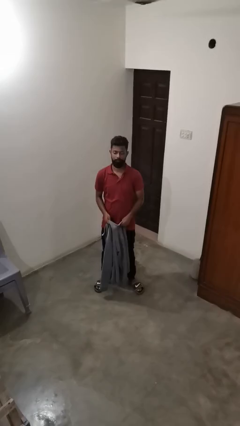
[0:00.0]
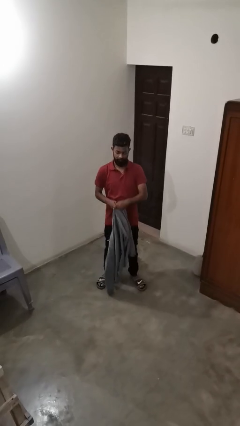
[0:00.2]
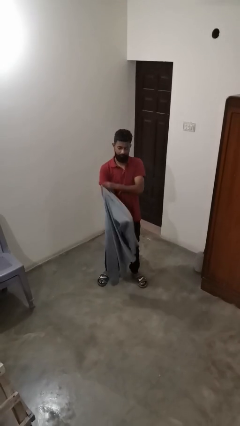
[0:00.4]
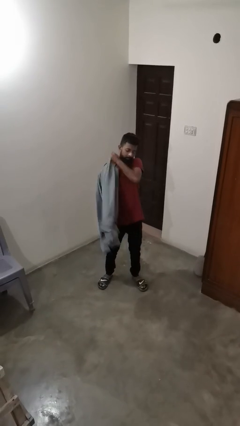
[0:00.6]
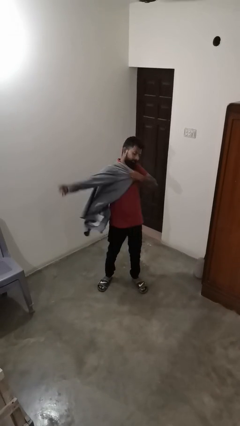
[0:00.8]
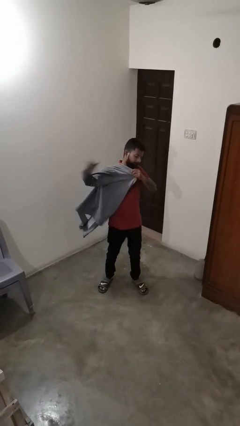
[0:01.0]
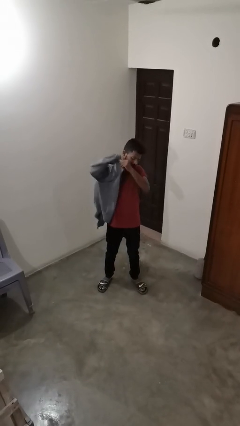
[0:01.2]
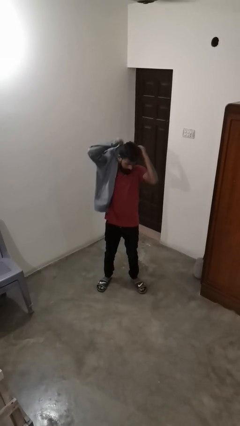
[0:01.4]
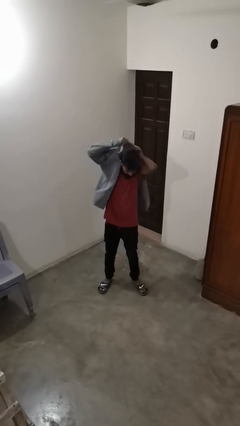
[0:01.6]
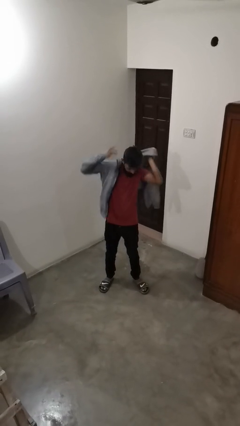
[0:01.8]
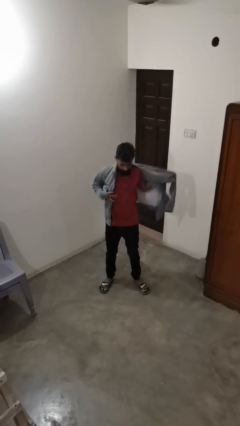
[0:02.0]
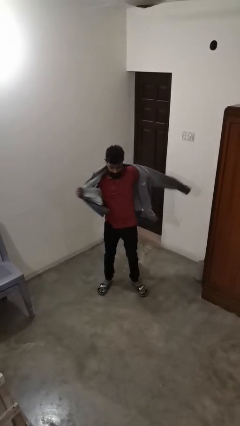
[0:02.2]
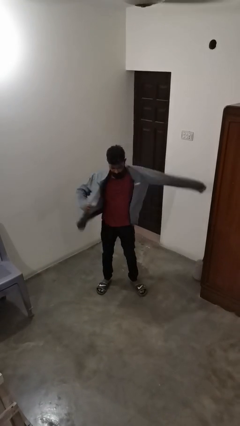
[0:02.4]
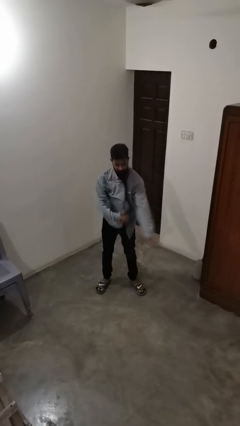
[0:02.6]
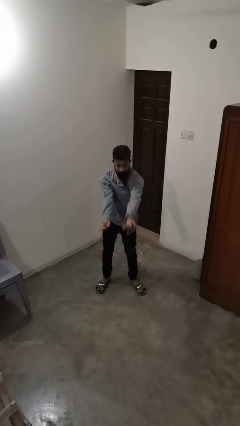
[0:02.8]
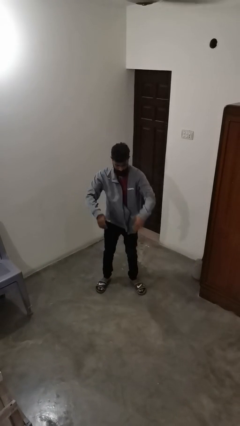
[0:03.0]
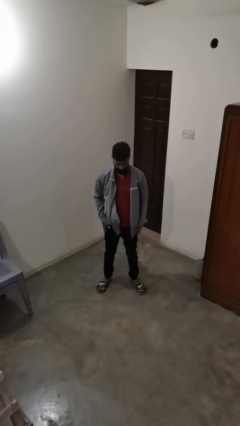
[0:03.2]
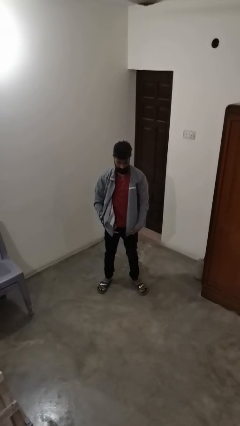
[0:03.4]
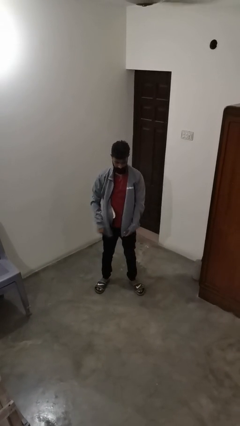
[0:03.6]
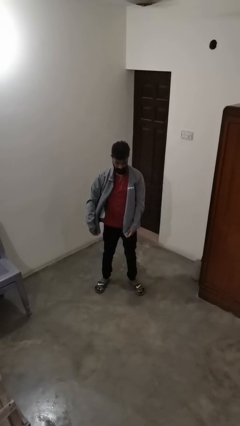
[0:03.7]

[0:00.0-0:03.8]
person puts on jacket

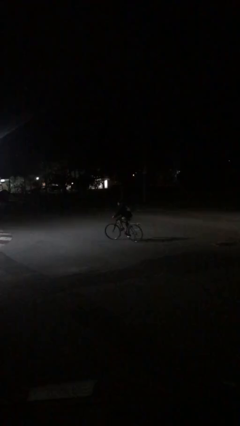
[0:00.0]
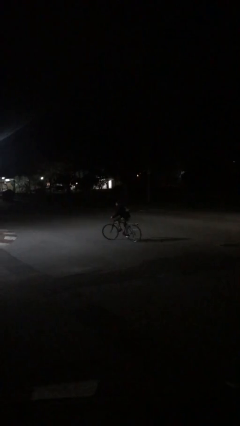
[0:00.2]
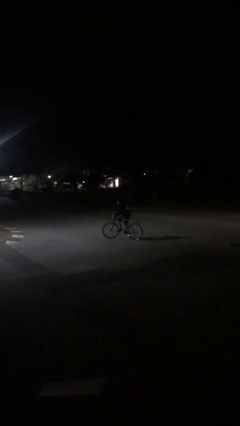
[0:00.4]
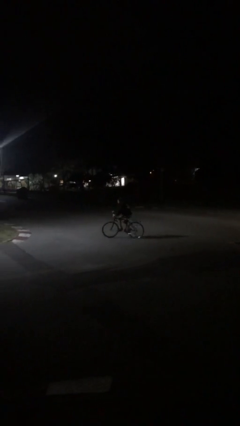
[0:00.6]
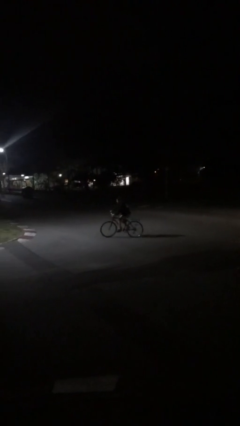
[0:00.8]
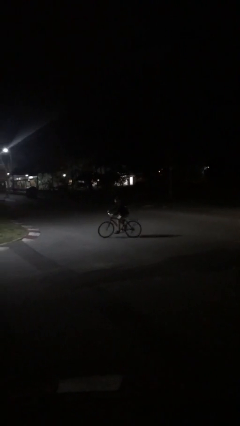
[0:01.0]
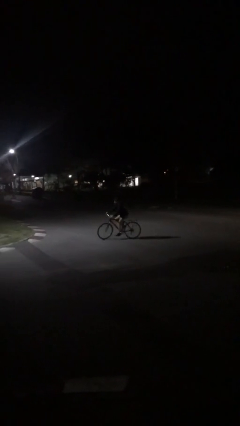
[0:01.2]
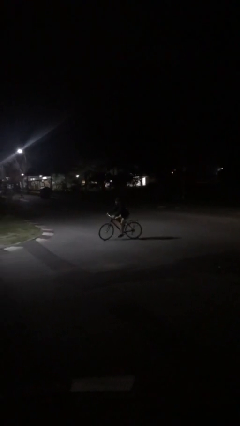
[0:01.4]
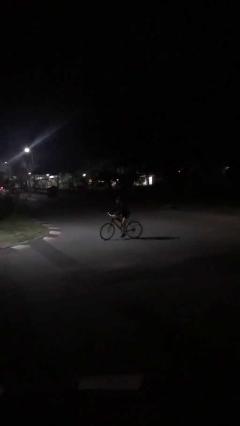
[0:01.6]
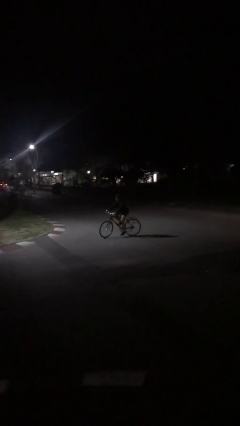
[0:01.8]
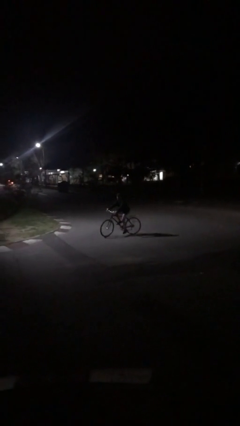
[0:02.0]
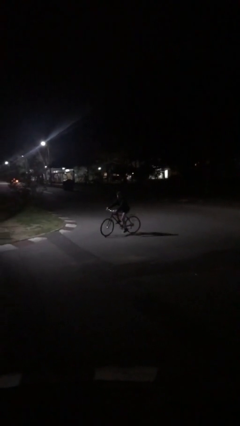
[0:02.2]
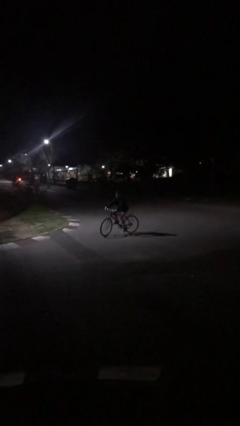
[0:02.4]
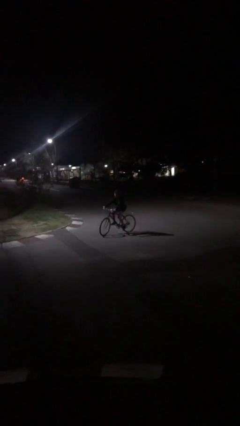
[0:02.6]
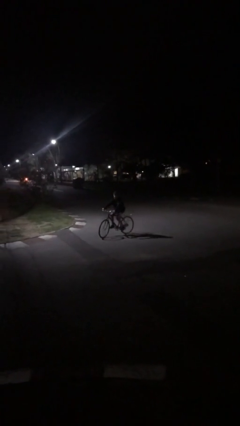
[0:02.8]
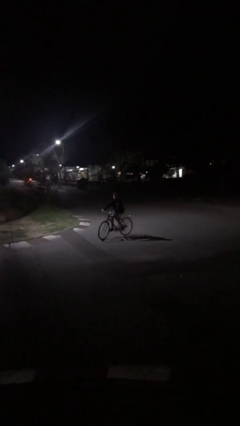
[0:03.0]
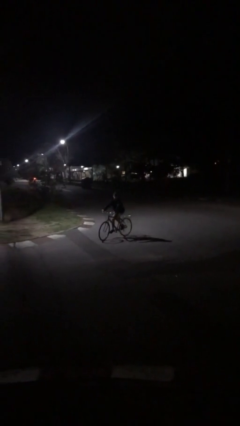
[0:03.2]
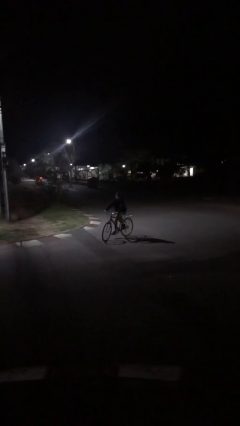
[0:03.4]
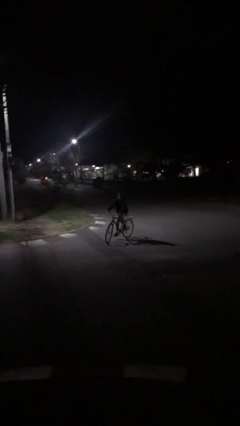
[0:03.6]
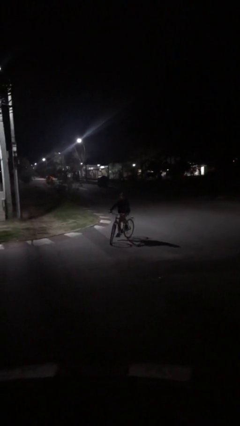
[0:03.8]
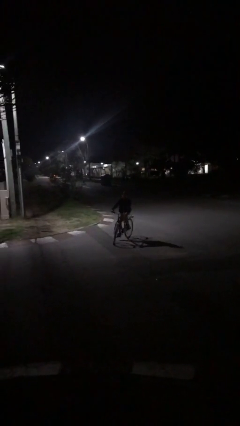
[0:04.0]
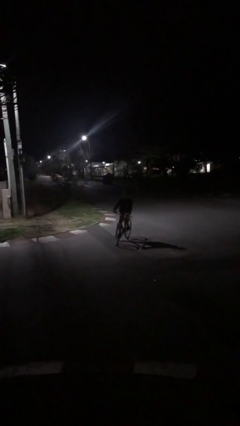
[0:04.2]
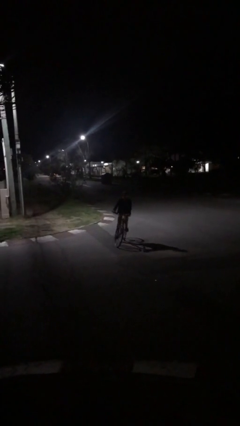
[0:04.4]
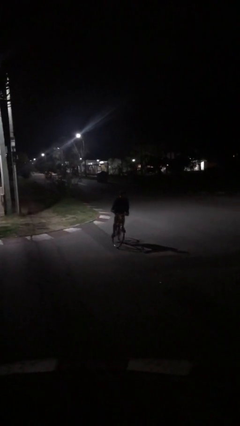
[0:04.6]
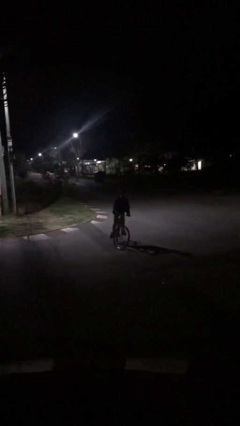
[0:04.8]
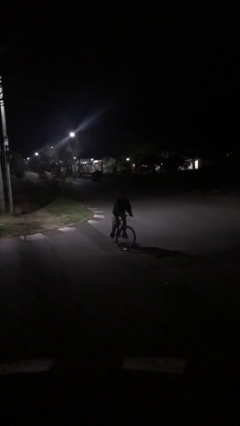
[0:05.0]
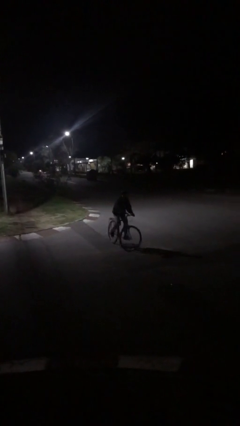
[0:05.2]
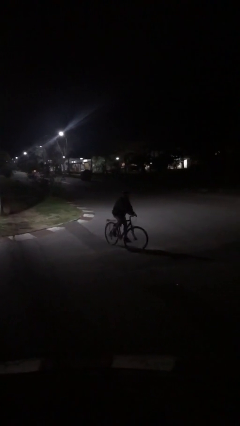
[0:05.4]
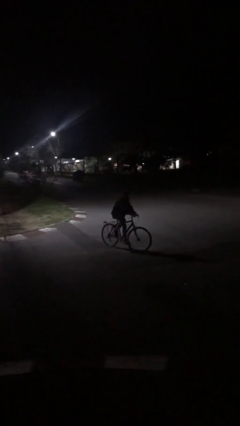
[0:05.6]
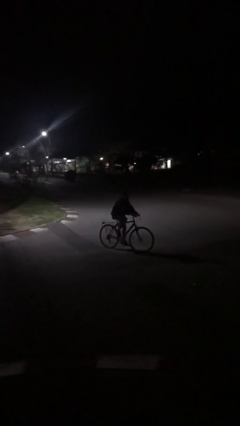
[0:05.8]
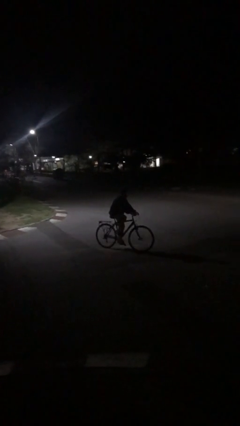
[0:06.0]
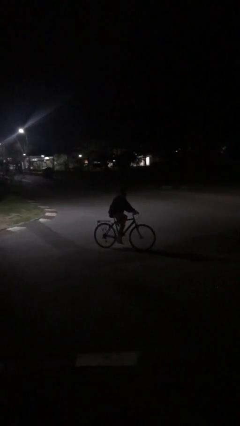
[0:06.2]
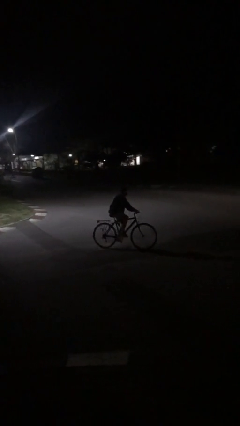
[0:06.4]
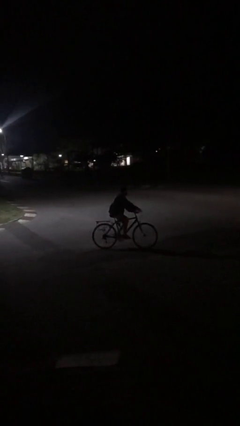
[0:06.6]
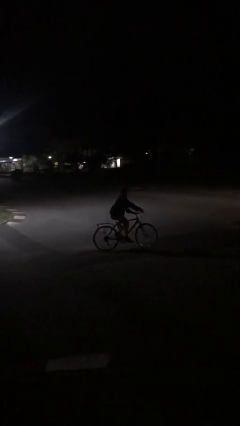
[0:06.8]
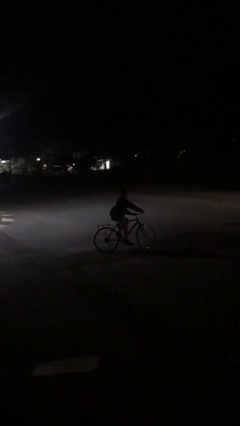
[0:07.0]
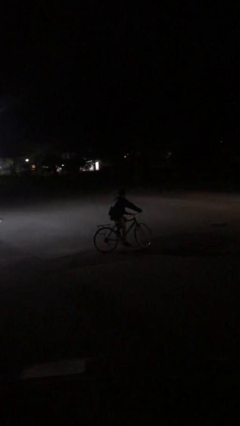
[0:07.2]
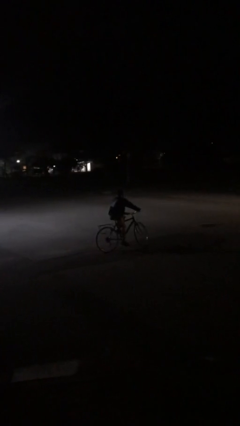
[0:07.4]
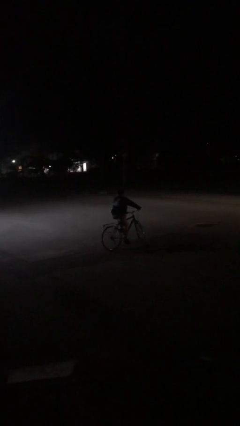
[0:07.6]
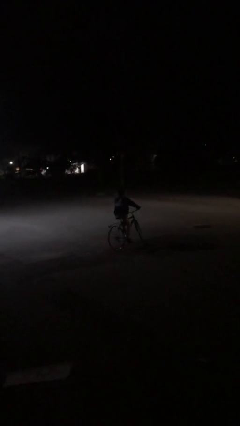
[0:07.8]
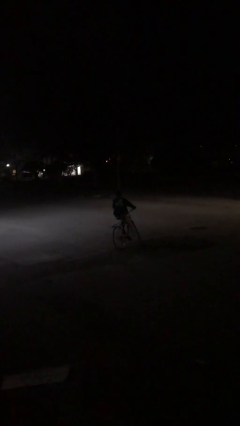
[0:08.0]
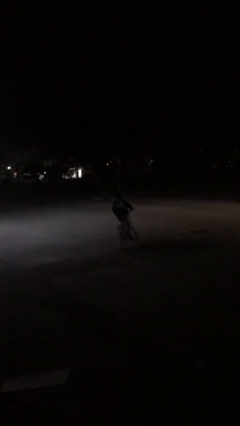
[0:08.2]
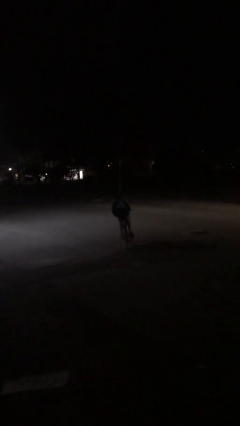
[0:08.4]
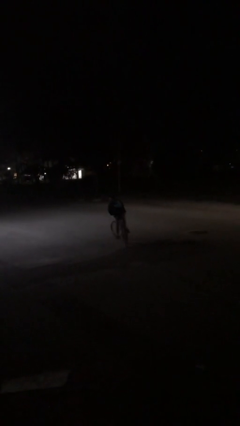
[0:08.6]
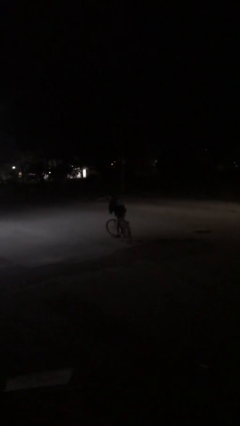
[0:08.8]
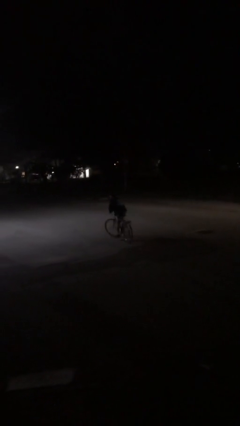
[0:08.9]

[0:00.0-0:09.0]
person rides bicycle

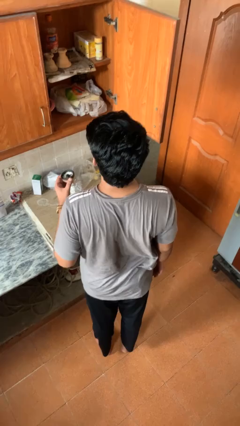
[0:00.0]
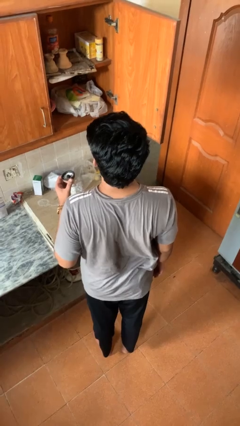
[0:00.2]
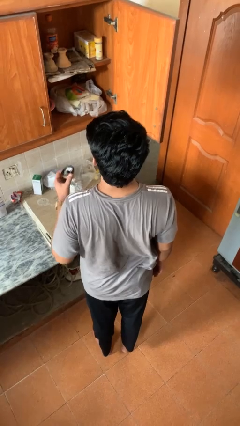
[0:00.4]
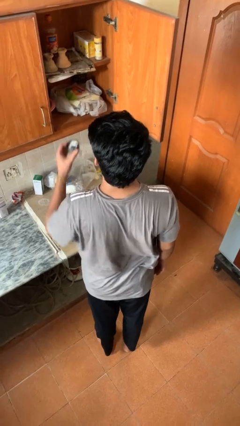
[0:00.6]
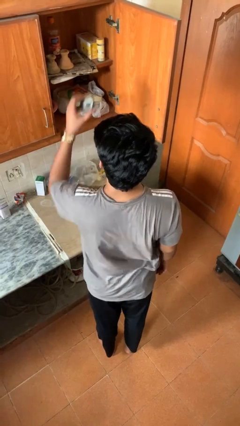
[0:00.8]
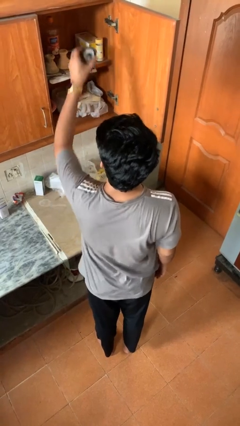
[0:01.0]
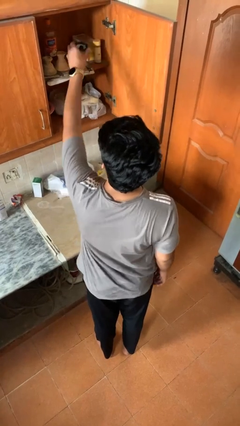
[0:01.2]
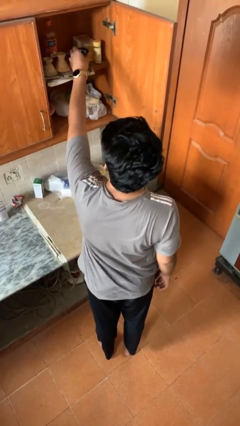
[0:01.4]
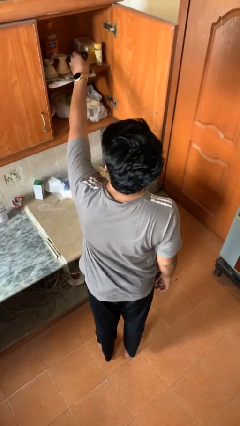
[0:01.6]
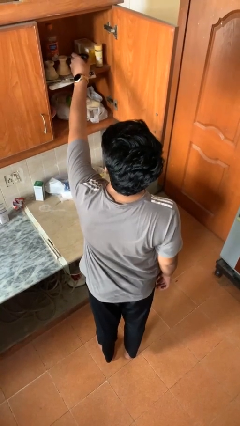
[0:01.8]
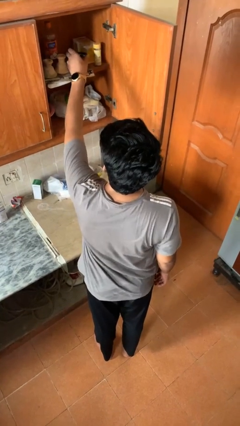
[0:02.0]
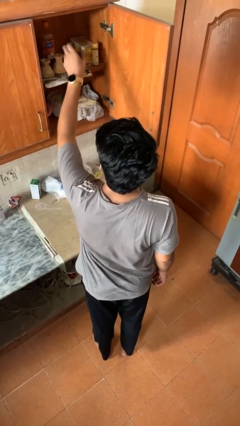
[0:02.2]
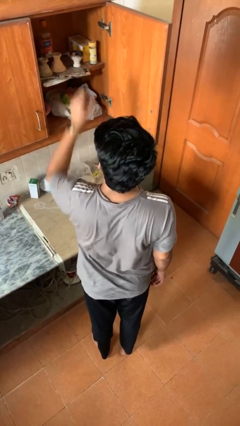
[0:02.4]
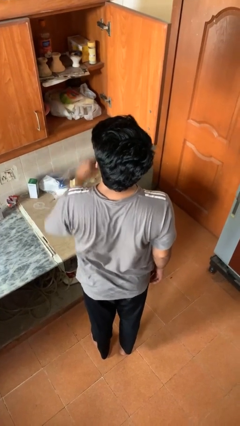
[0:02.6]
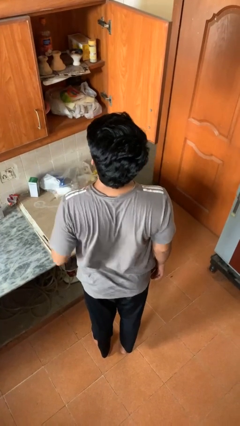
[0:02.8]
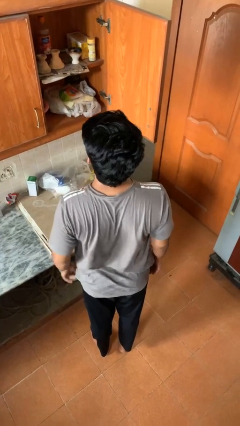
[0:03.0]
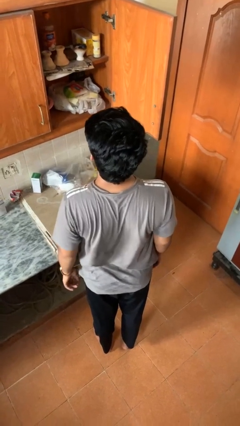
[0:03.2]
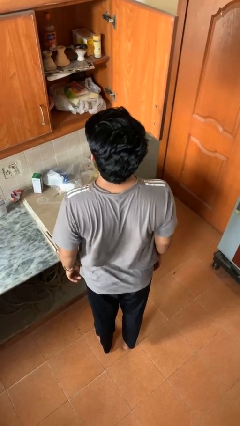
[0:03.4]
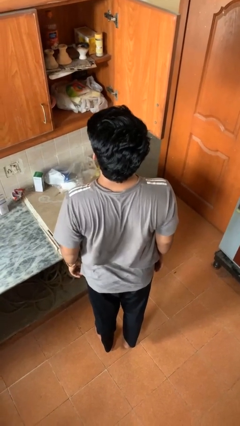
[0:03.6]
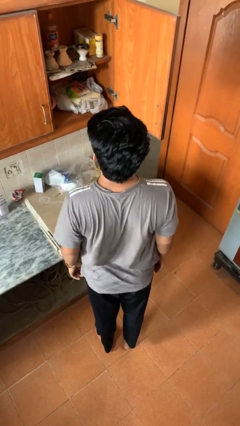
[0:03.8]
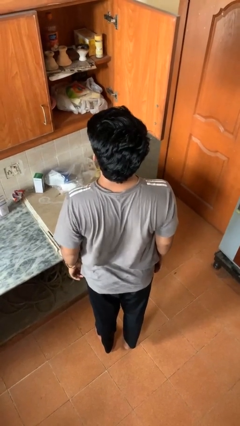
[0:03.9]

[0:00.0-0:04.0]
person puts object in cabinet

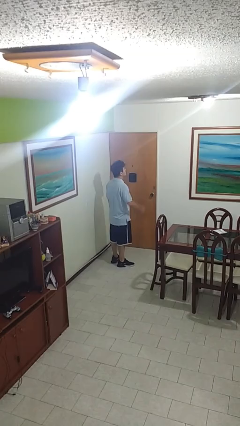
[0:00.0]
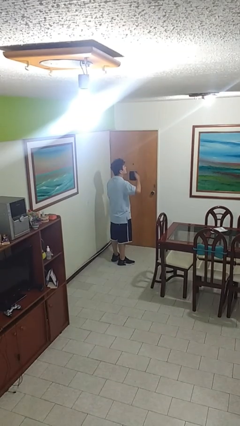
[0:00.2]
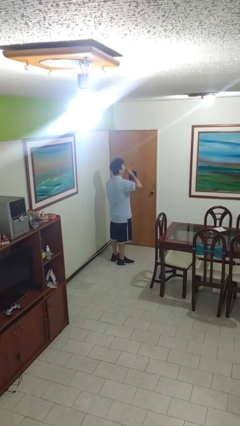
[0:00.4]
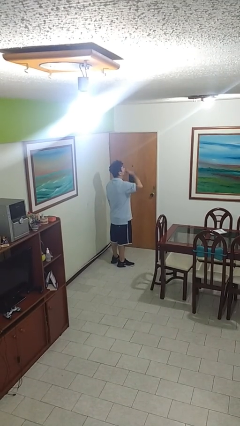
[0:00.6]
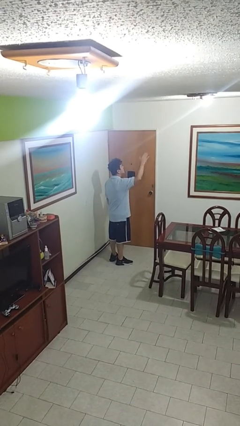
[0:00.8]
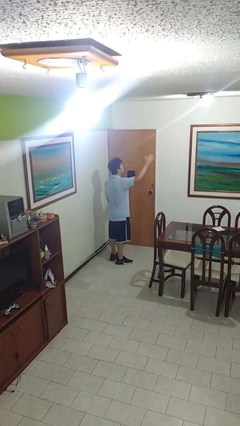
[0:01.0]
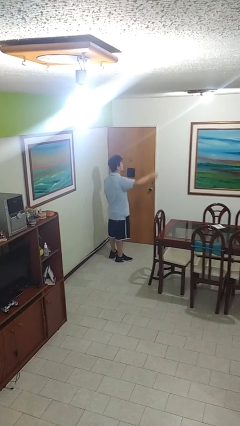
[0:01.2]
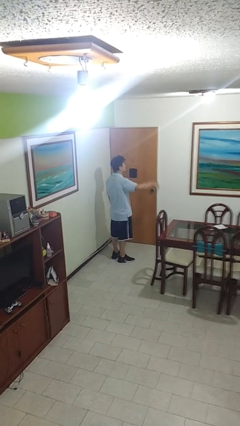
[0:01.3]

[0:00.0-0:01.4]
person gestures blow kiss
